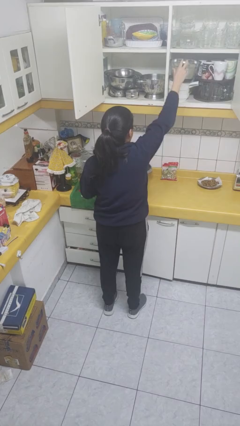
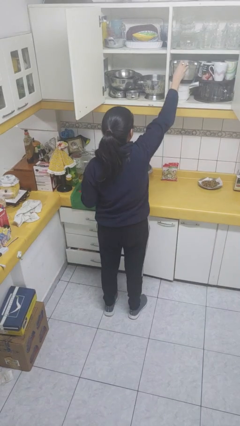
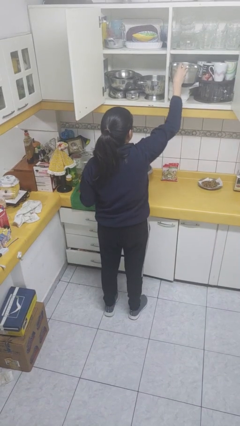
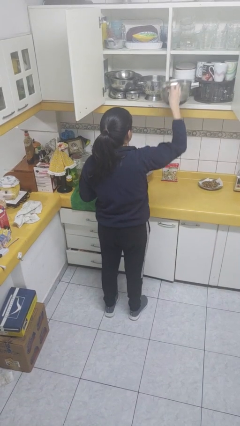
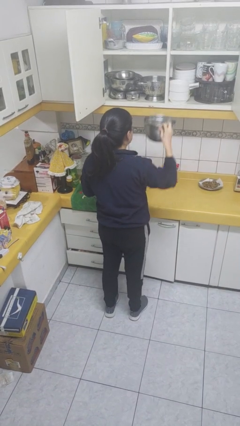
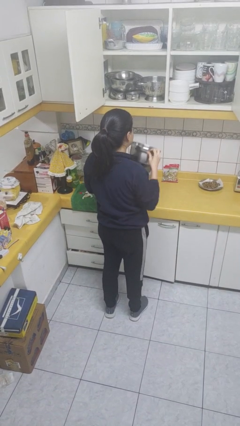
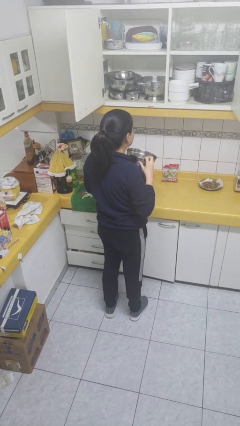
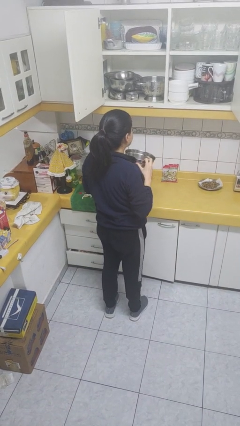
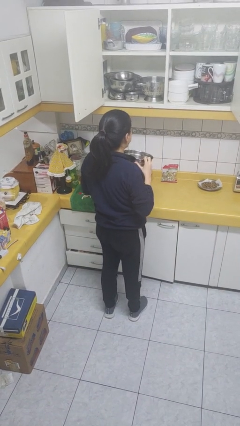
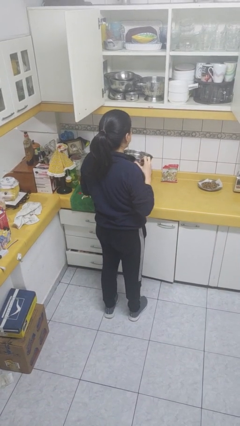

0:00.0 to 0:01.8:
person picks up object from cabinet

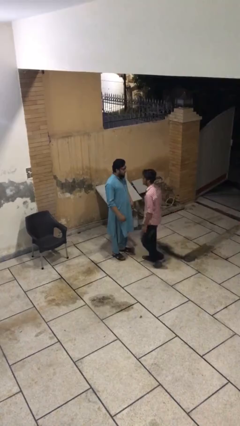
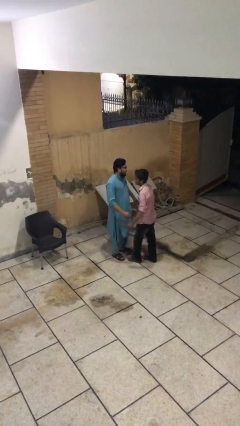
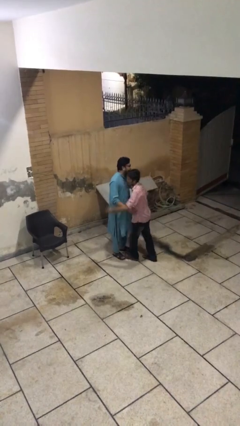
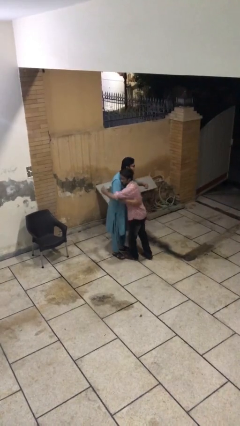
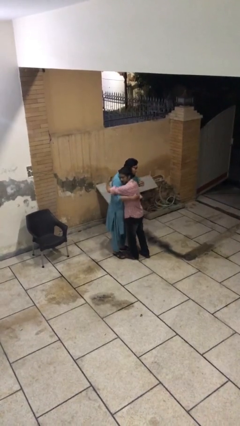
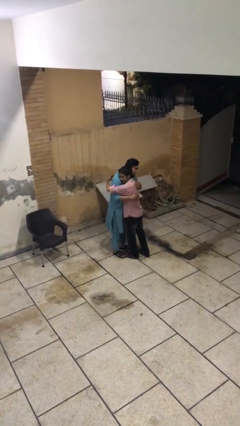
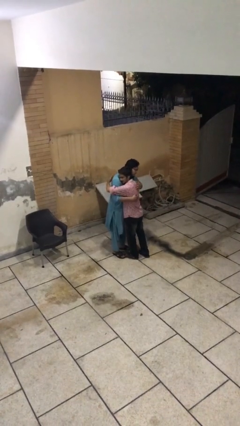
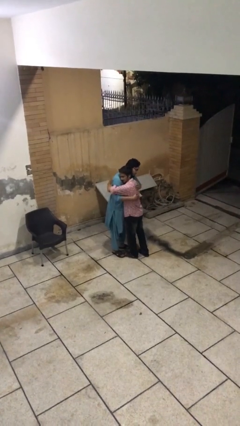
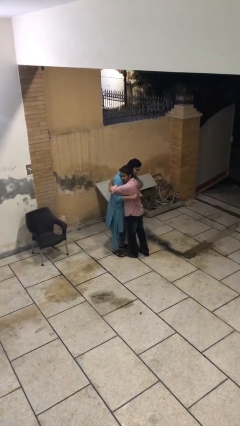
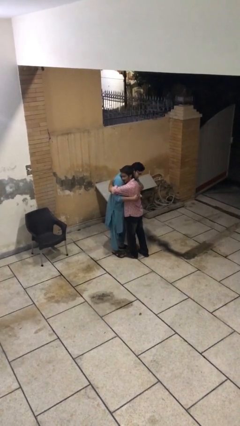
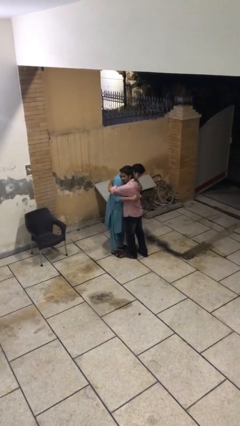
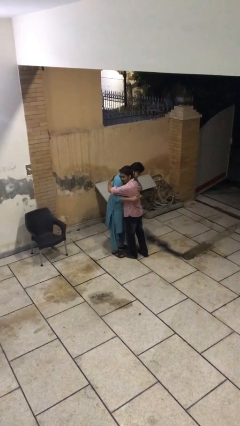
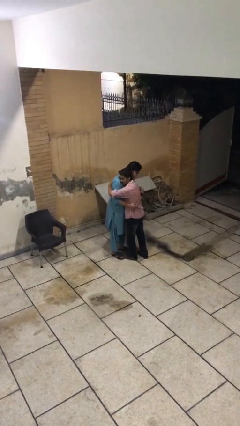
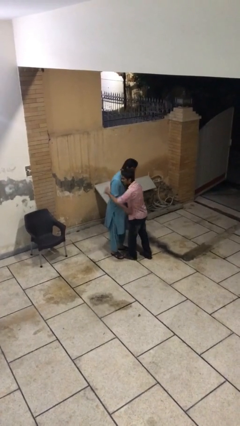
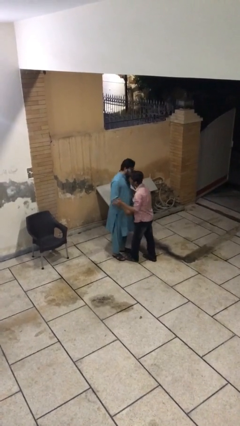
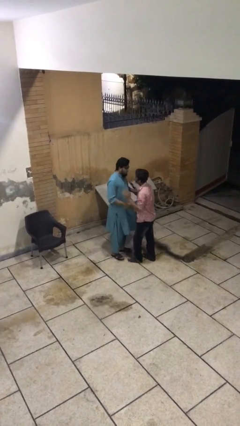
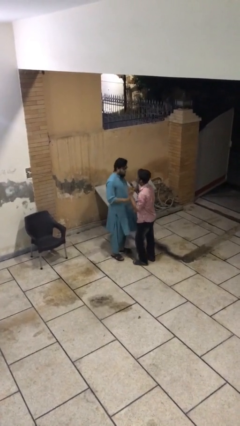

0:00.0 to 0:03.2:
person embraces person
